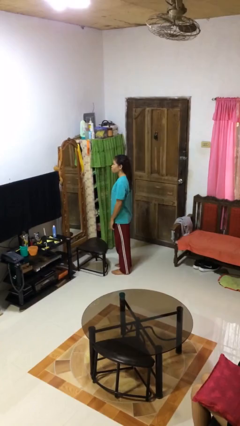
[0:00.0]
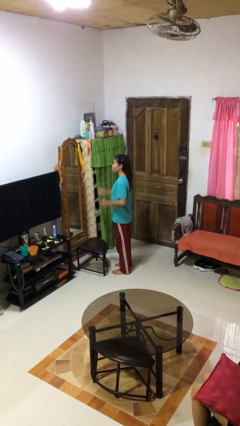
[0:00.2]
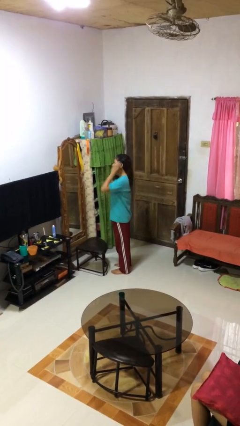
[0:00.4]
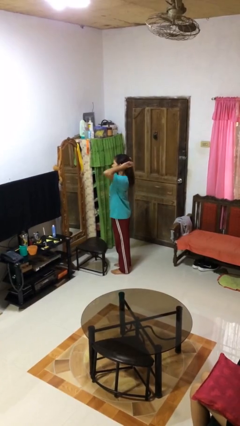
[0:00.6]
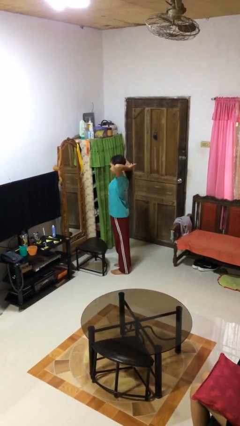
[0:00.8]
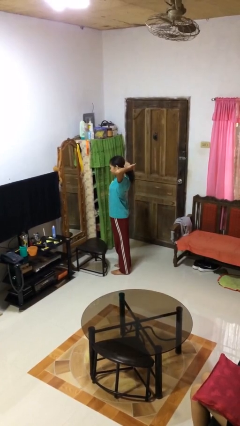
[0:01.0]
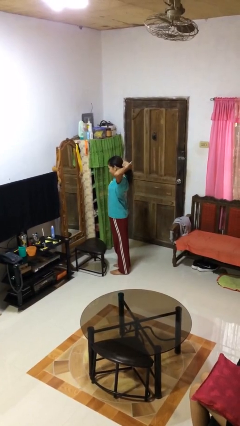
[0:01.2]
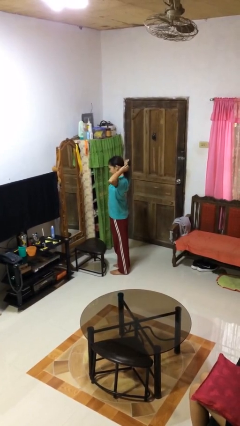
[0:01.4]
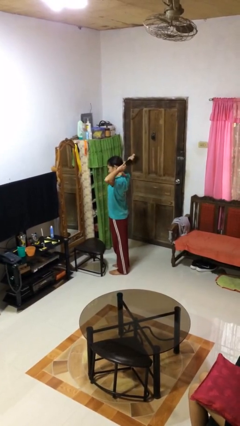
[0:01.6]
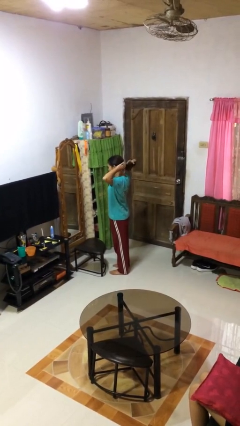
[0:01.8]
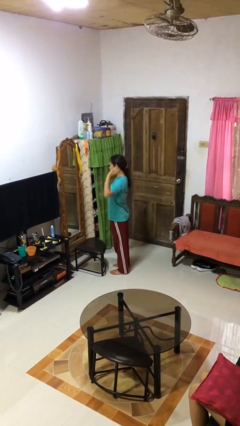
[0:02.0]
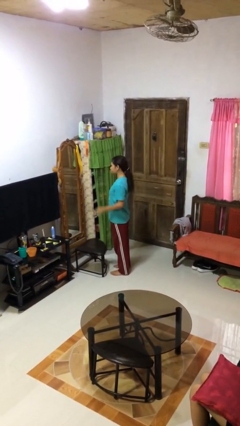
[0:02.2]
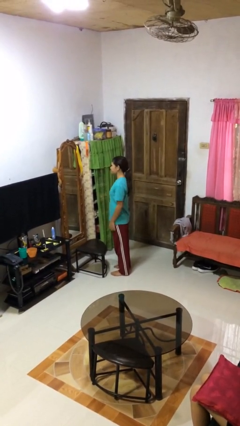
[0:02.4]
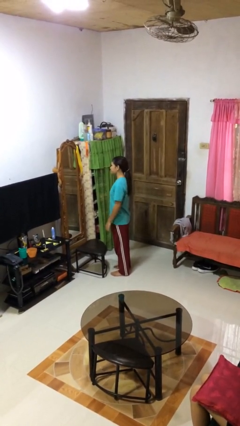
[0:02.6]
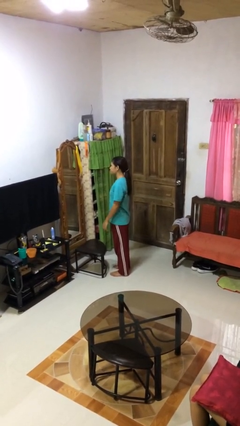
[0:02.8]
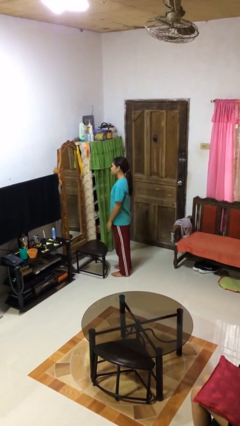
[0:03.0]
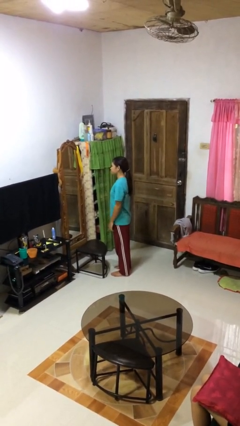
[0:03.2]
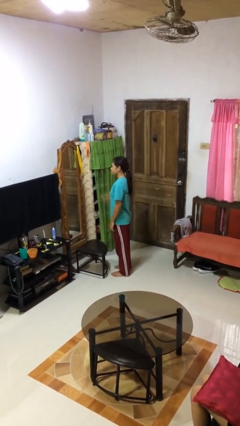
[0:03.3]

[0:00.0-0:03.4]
person puts hair in ponytail

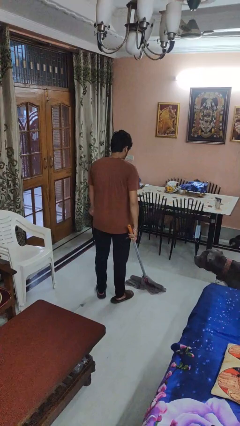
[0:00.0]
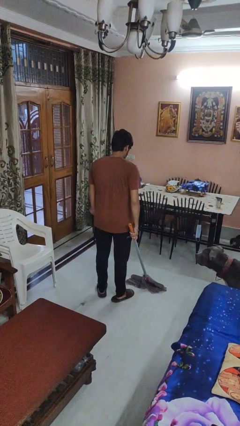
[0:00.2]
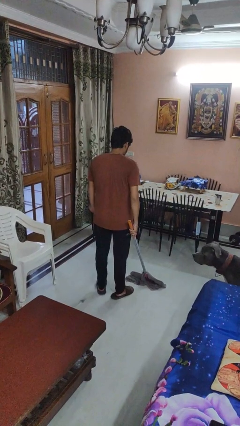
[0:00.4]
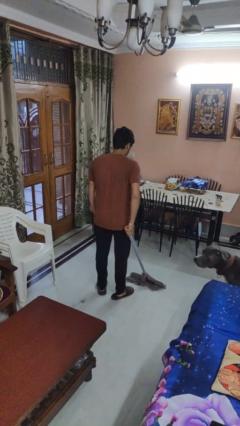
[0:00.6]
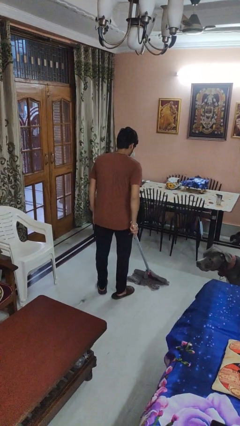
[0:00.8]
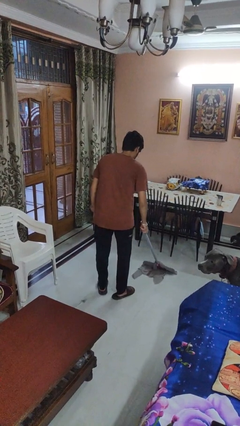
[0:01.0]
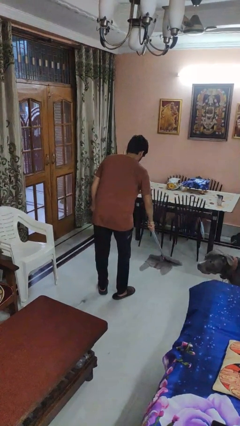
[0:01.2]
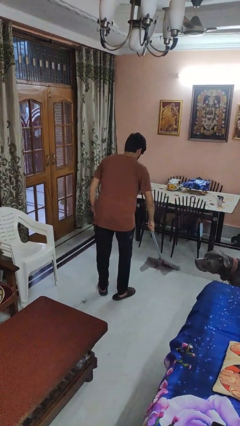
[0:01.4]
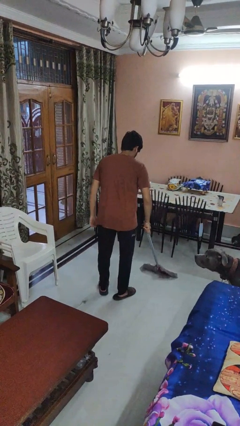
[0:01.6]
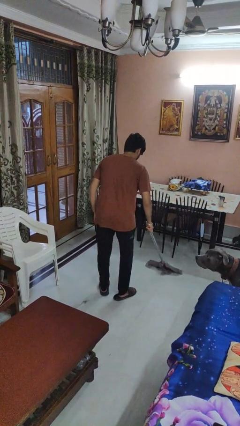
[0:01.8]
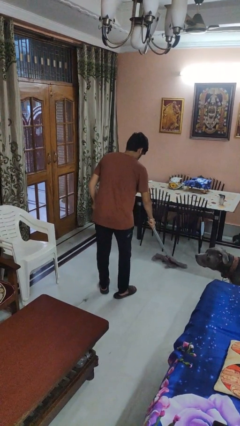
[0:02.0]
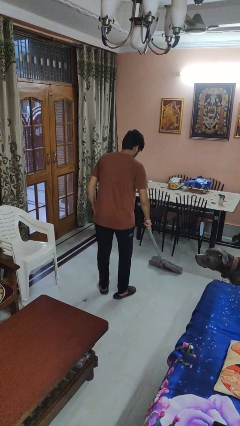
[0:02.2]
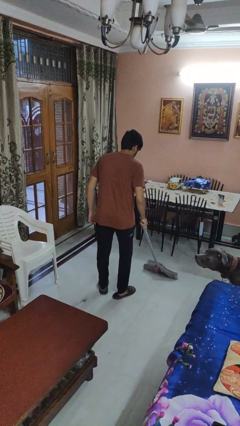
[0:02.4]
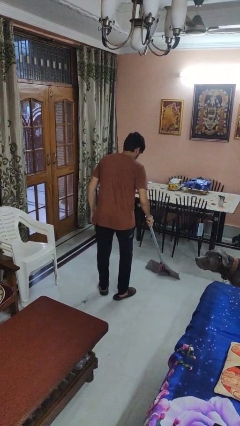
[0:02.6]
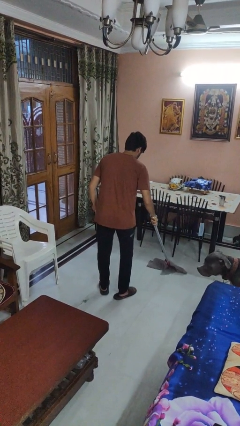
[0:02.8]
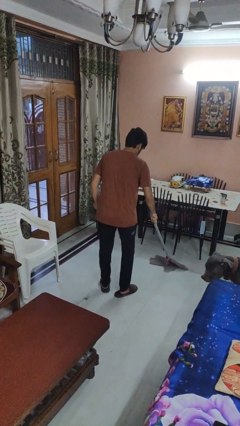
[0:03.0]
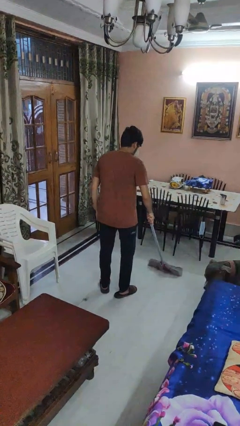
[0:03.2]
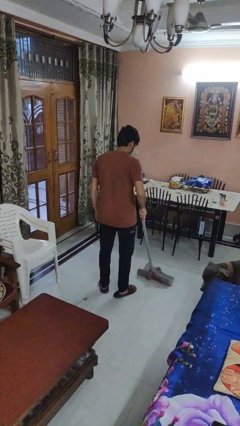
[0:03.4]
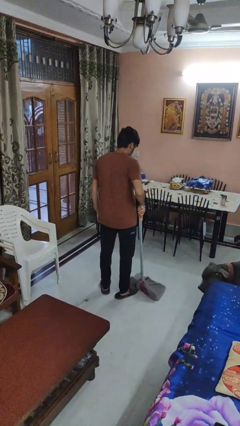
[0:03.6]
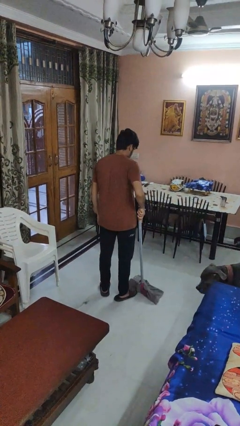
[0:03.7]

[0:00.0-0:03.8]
person mops

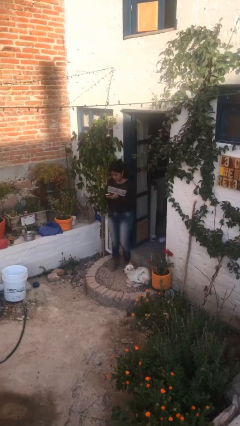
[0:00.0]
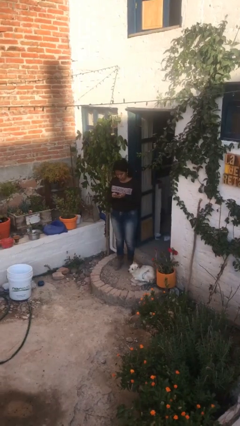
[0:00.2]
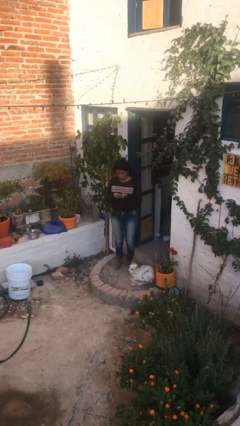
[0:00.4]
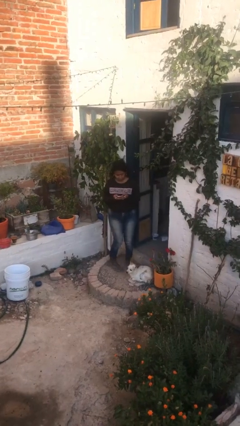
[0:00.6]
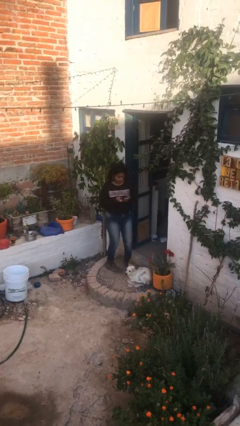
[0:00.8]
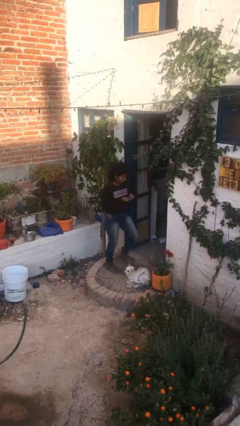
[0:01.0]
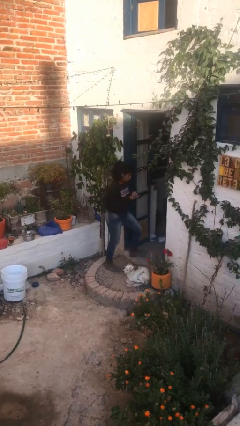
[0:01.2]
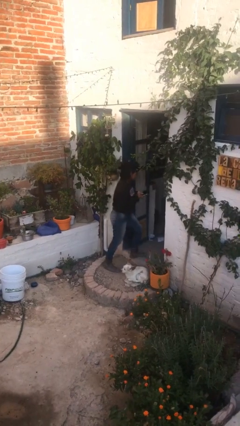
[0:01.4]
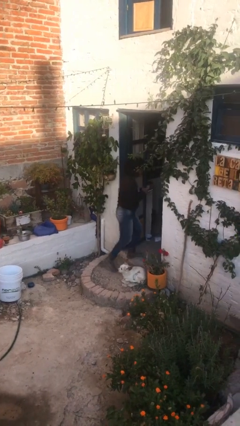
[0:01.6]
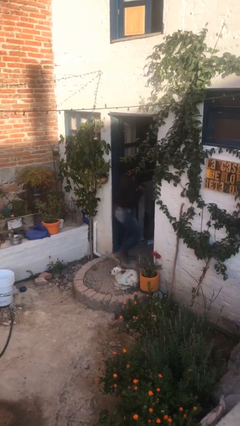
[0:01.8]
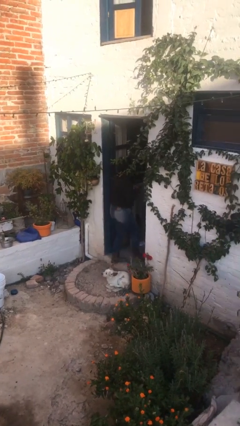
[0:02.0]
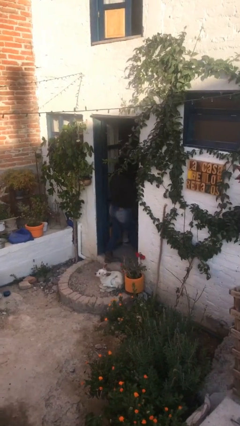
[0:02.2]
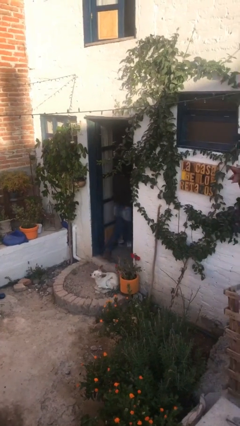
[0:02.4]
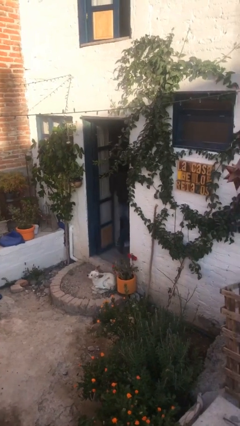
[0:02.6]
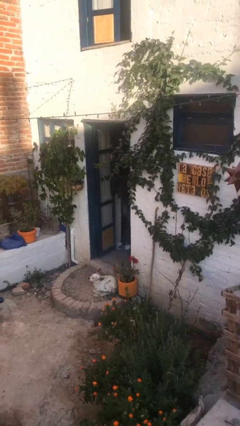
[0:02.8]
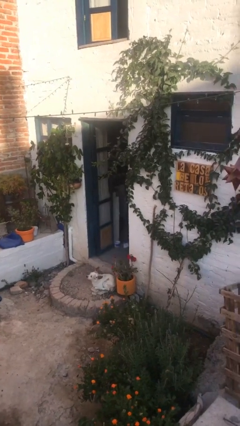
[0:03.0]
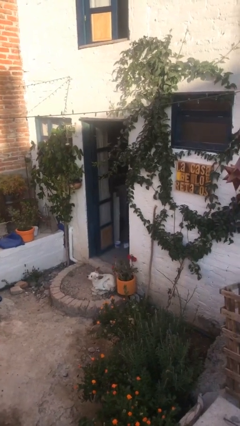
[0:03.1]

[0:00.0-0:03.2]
person exits scene through structure

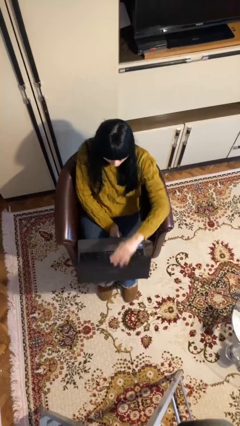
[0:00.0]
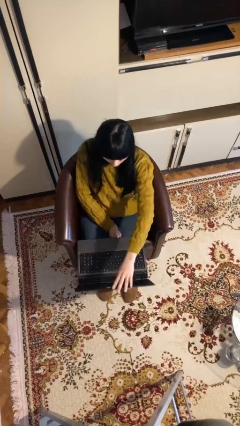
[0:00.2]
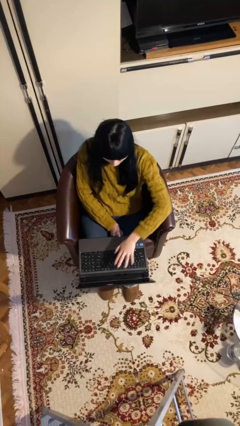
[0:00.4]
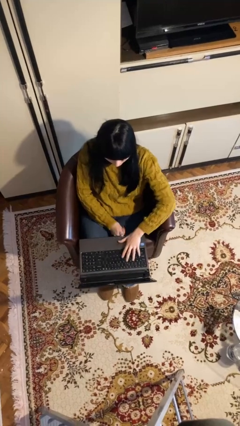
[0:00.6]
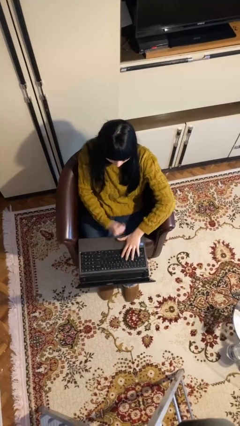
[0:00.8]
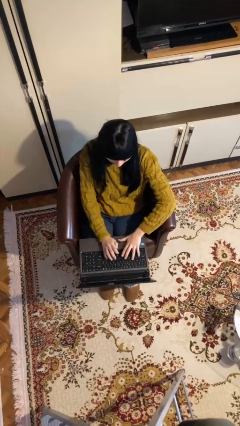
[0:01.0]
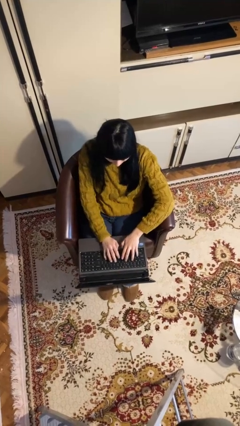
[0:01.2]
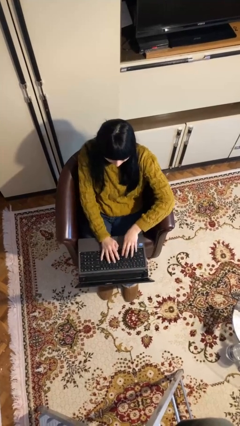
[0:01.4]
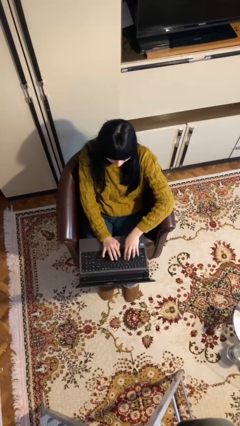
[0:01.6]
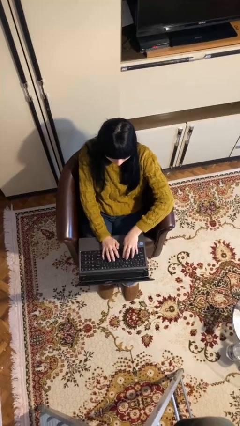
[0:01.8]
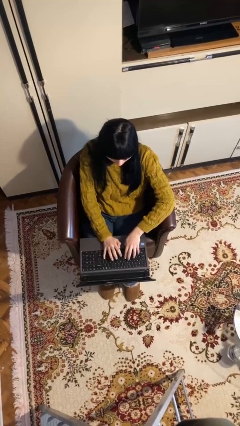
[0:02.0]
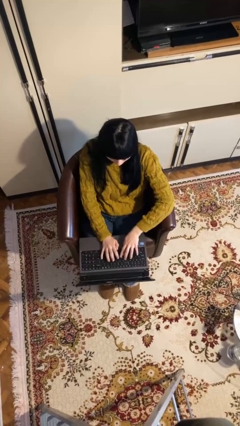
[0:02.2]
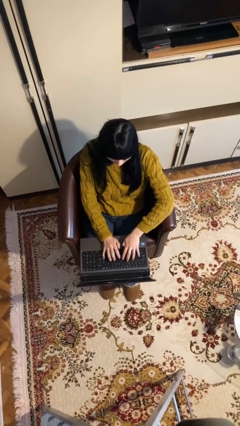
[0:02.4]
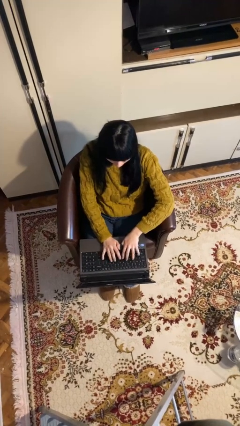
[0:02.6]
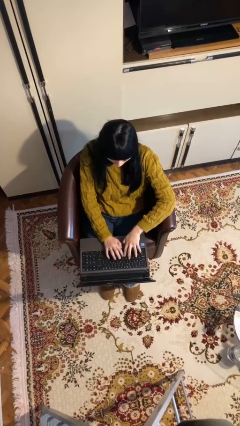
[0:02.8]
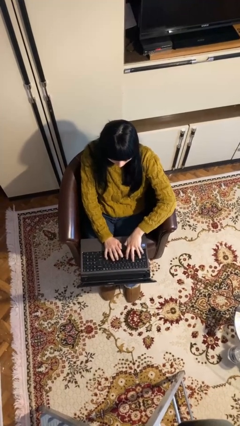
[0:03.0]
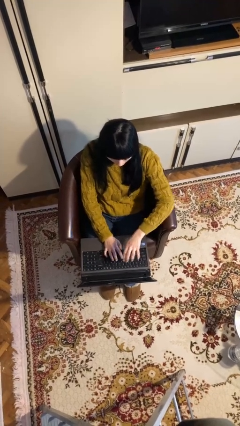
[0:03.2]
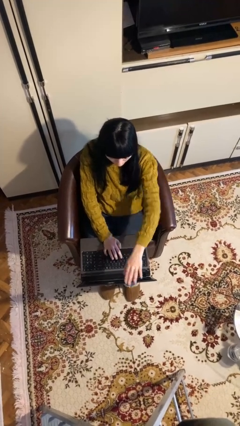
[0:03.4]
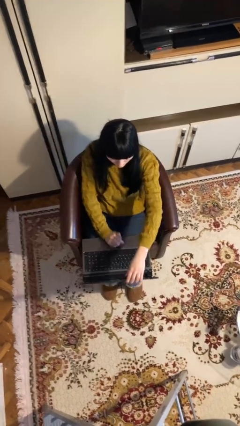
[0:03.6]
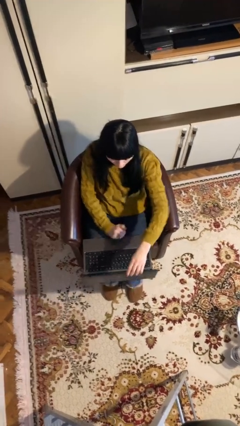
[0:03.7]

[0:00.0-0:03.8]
person interacts with laptop

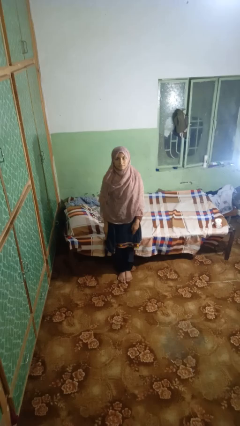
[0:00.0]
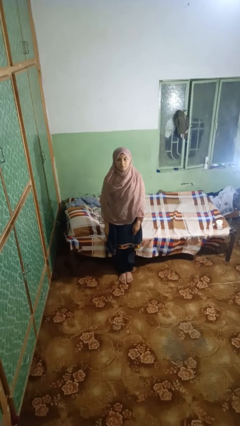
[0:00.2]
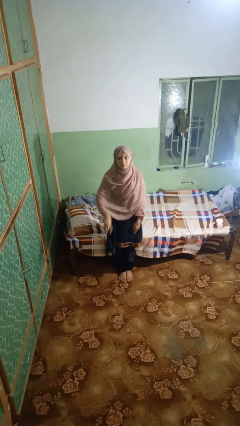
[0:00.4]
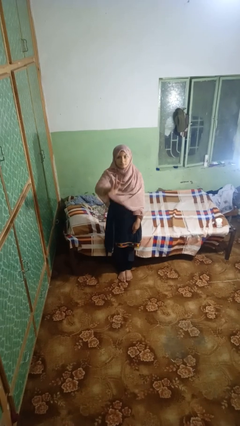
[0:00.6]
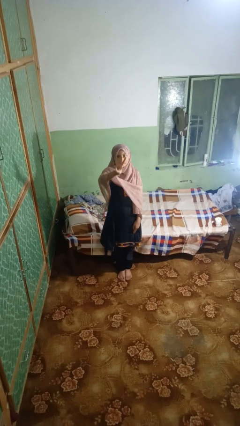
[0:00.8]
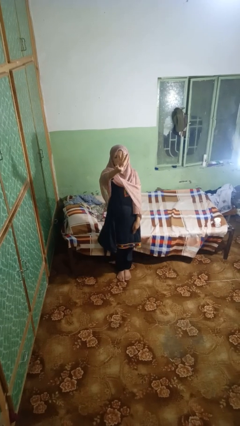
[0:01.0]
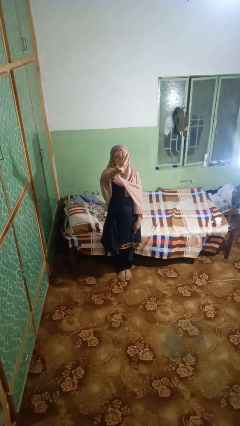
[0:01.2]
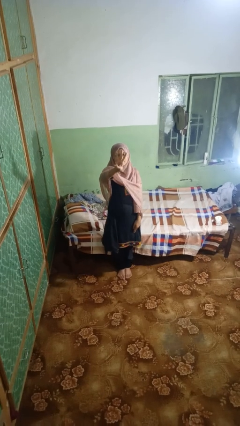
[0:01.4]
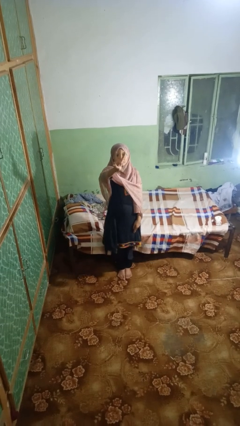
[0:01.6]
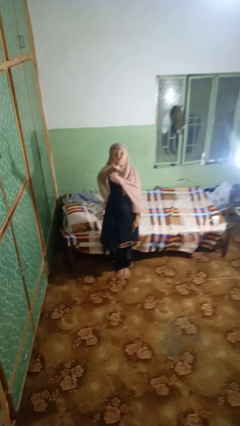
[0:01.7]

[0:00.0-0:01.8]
person gestures number three

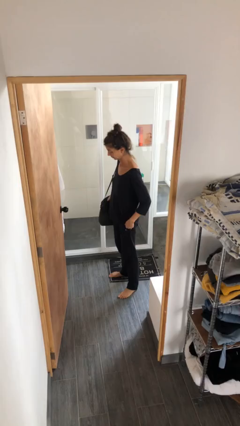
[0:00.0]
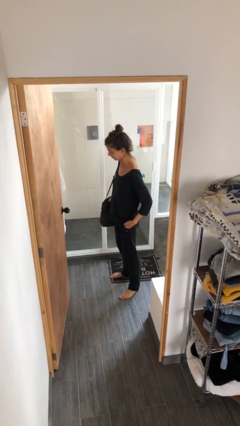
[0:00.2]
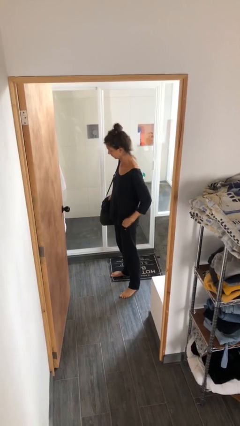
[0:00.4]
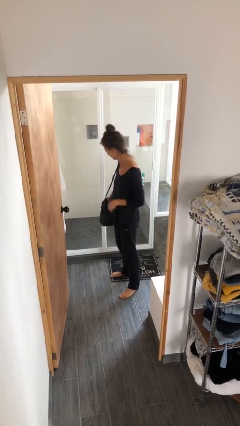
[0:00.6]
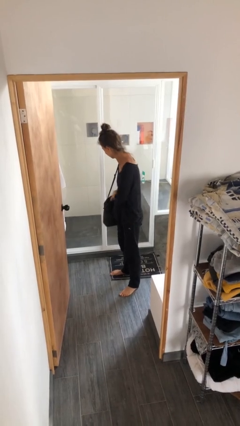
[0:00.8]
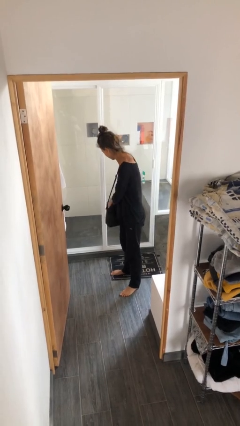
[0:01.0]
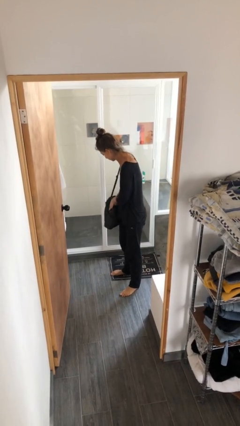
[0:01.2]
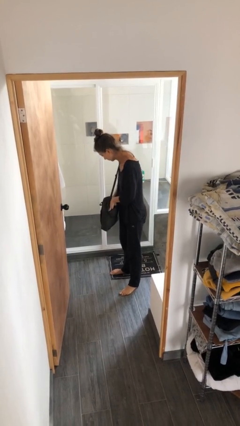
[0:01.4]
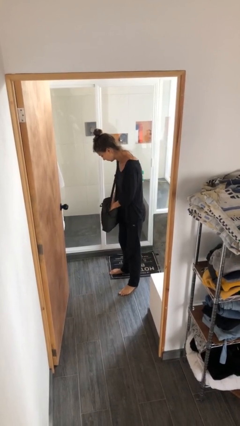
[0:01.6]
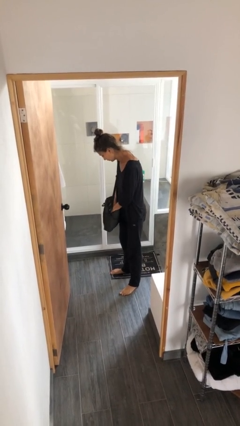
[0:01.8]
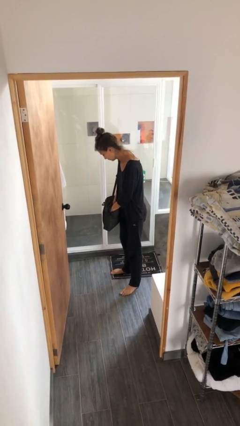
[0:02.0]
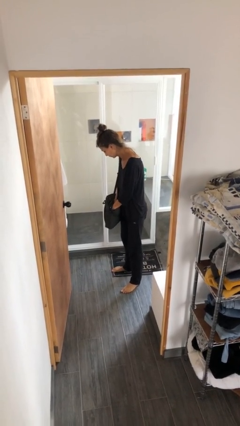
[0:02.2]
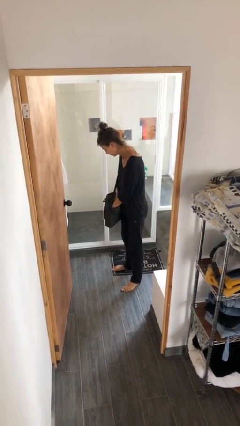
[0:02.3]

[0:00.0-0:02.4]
person searches in purse
